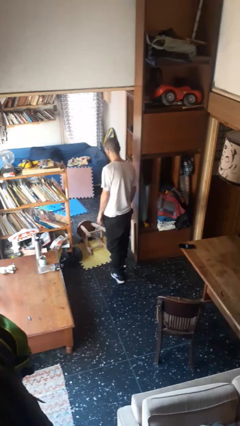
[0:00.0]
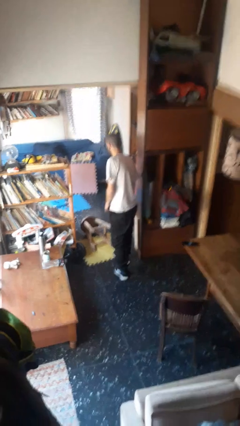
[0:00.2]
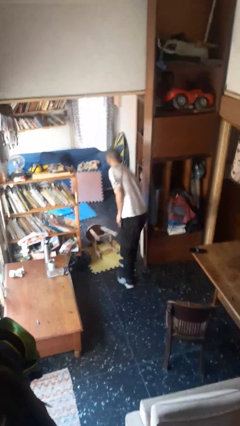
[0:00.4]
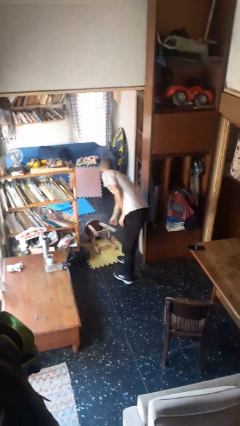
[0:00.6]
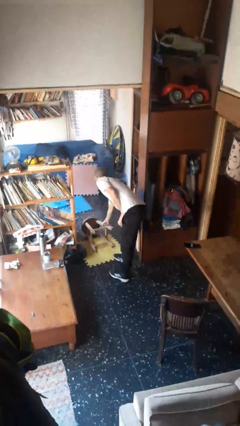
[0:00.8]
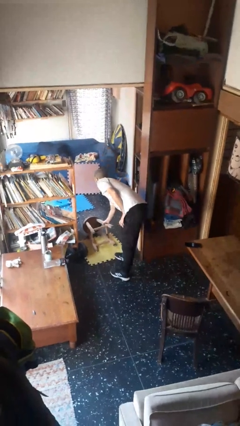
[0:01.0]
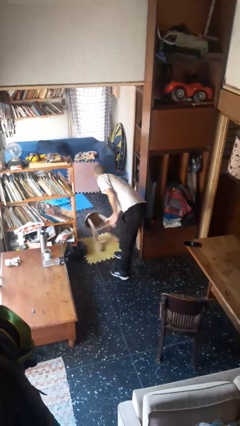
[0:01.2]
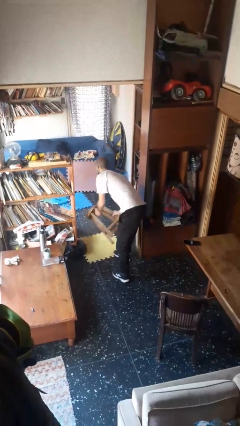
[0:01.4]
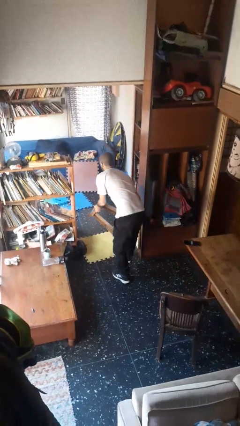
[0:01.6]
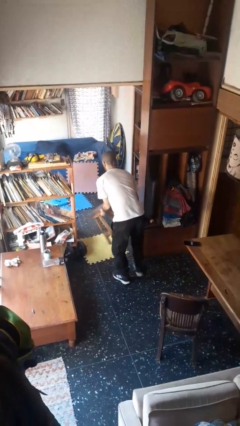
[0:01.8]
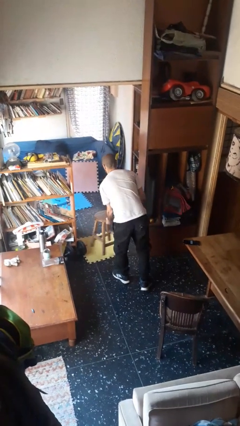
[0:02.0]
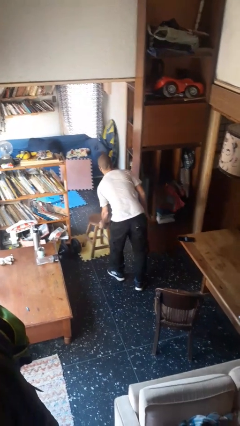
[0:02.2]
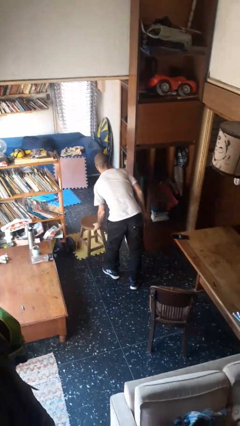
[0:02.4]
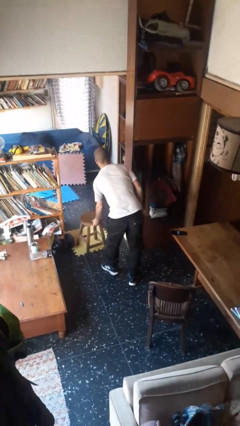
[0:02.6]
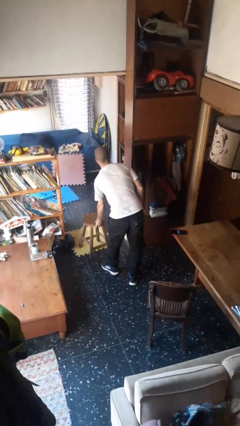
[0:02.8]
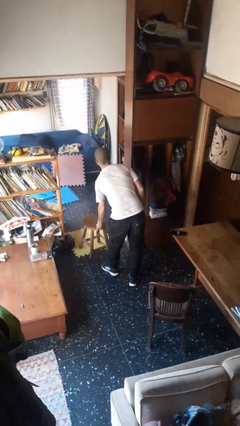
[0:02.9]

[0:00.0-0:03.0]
person sets upright furniture

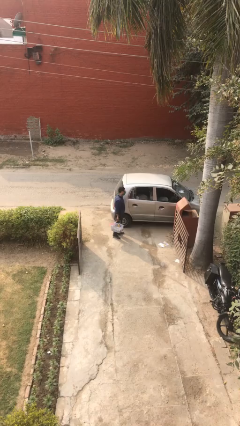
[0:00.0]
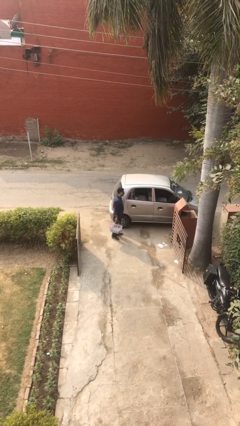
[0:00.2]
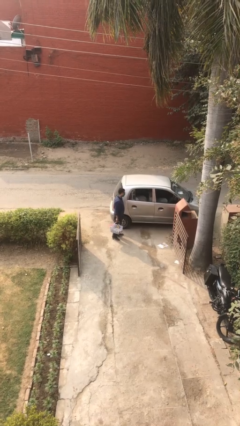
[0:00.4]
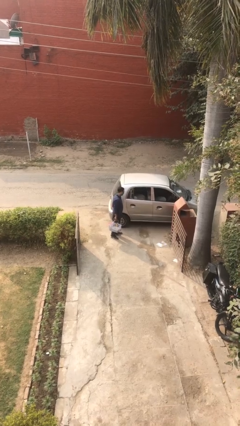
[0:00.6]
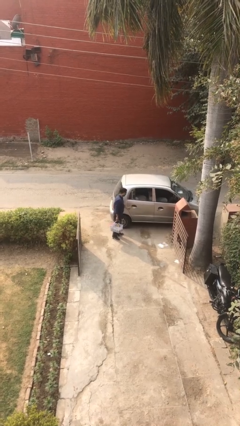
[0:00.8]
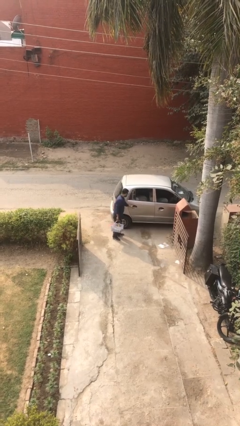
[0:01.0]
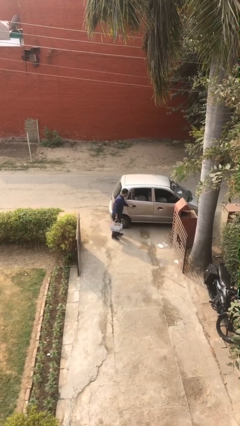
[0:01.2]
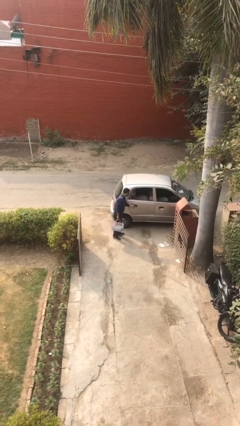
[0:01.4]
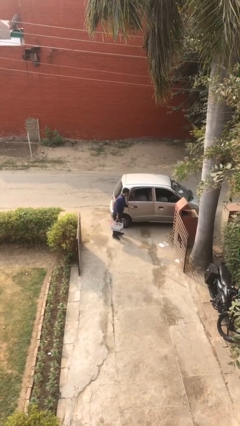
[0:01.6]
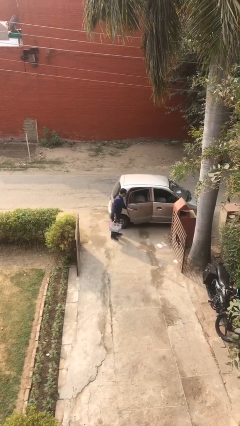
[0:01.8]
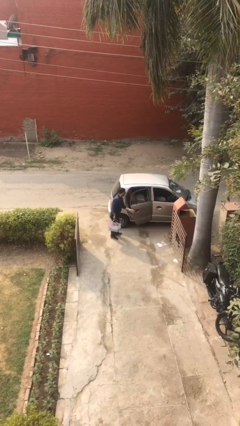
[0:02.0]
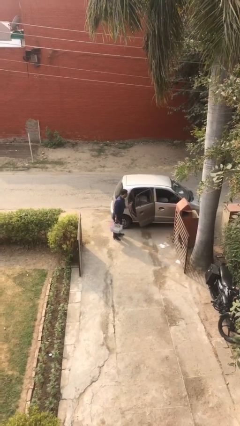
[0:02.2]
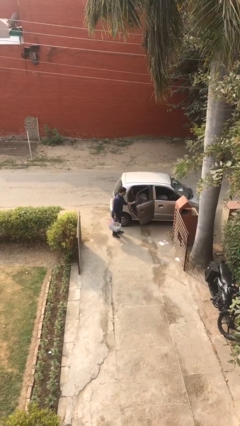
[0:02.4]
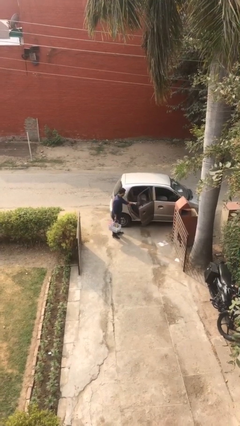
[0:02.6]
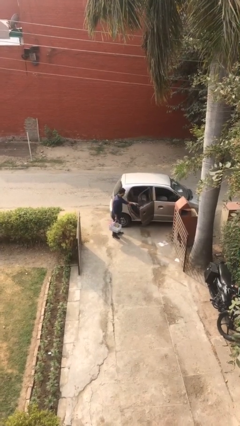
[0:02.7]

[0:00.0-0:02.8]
person opens car door

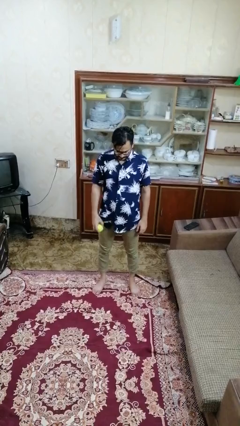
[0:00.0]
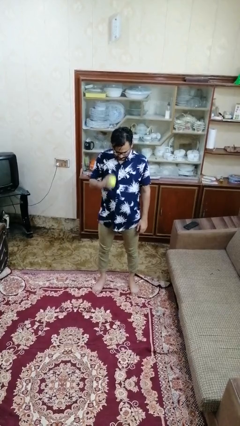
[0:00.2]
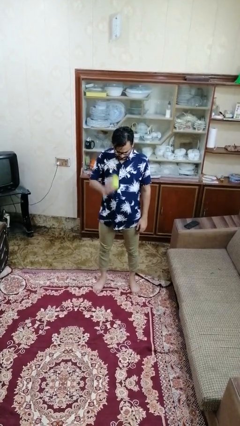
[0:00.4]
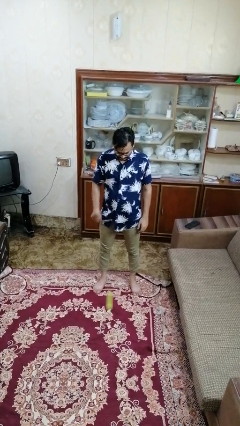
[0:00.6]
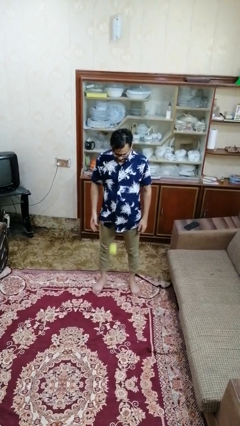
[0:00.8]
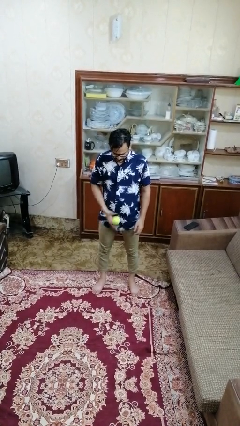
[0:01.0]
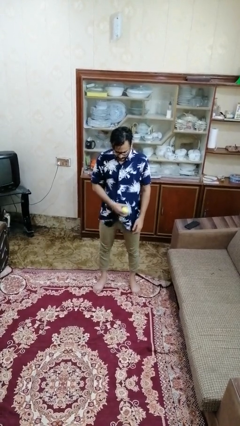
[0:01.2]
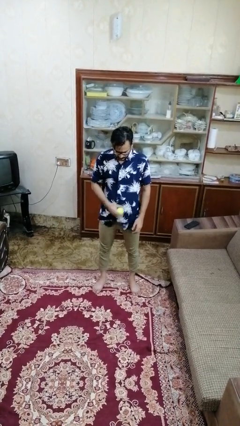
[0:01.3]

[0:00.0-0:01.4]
person bounces ball on floor

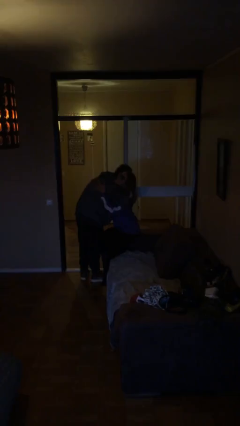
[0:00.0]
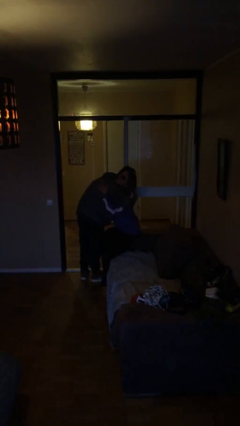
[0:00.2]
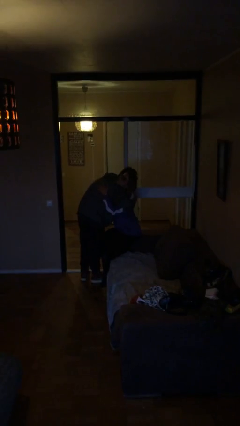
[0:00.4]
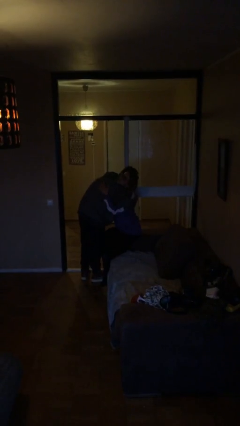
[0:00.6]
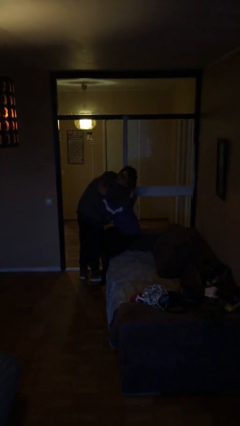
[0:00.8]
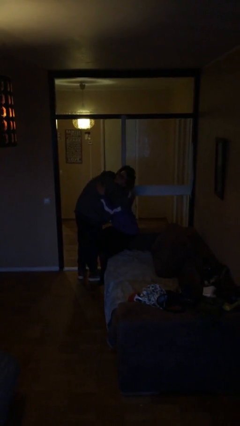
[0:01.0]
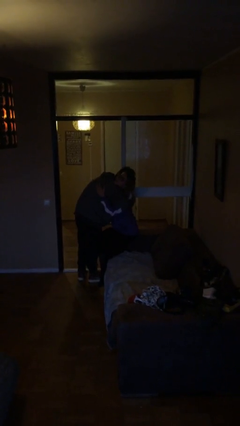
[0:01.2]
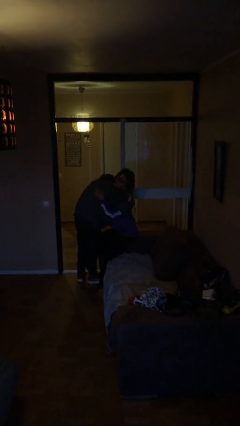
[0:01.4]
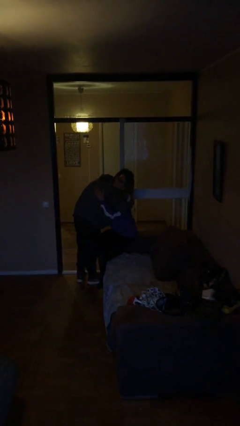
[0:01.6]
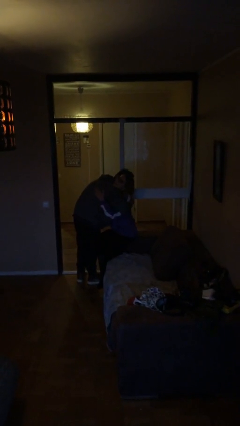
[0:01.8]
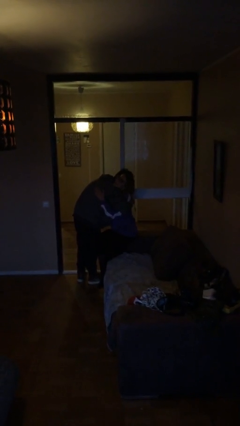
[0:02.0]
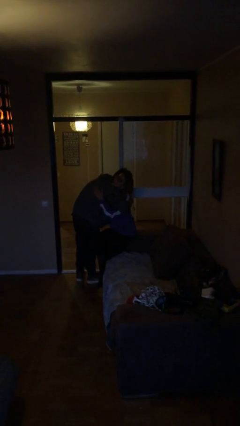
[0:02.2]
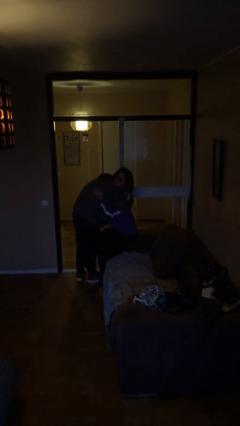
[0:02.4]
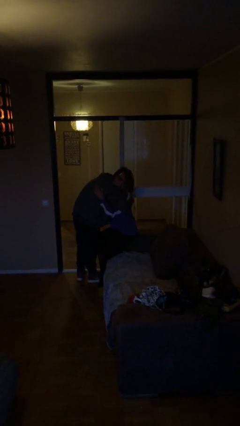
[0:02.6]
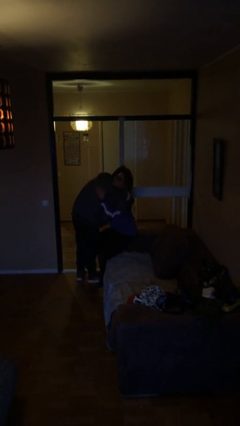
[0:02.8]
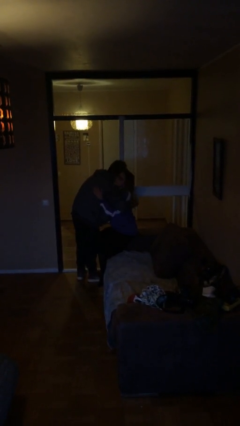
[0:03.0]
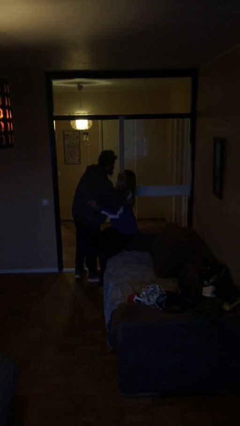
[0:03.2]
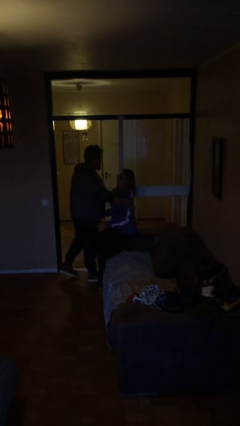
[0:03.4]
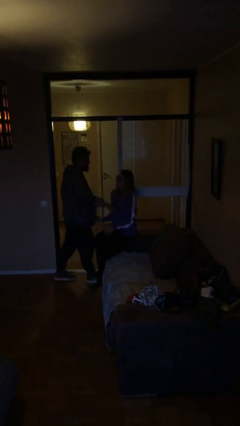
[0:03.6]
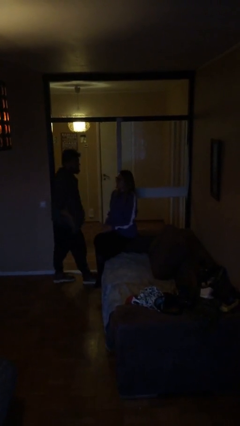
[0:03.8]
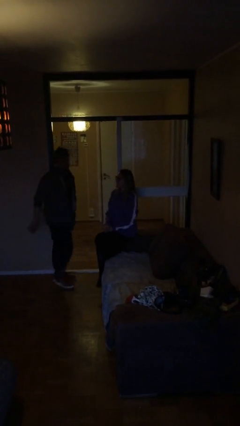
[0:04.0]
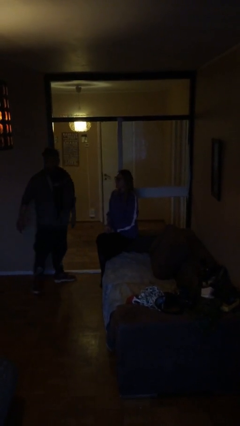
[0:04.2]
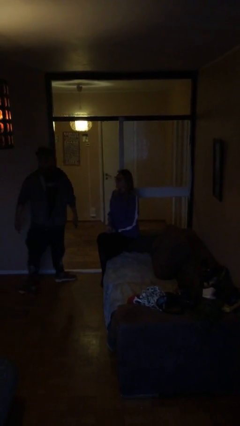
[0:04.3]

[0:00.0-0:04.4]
person embraces person

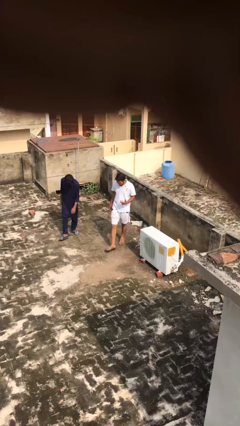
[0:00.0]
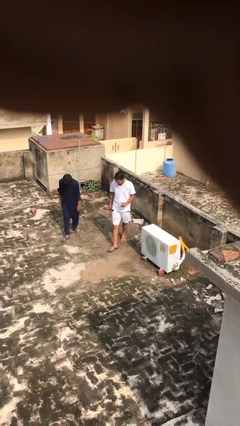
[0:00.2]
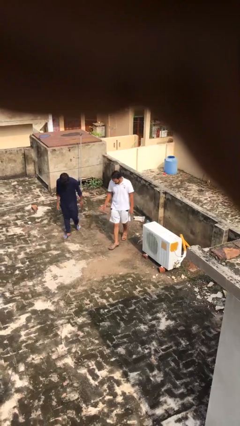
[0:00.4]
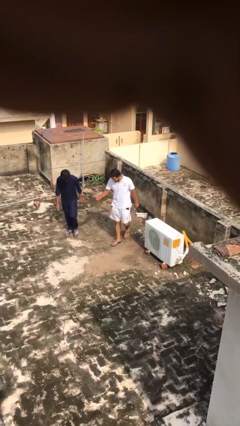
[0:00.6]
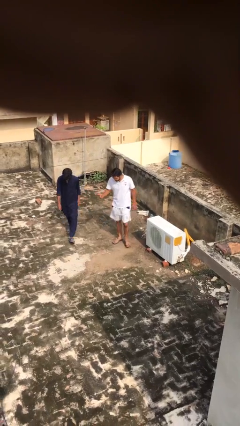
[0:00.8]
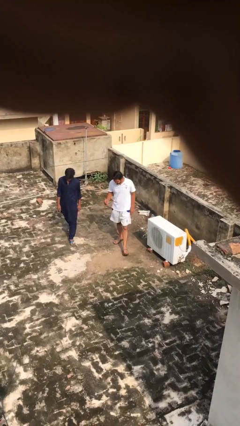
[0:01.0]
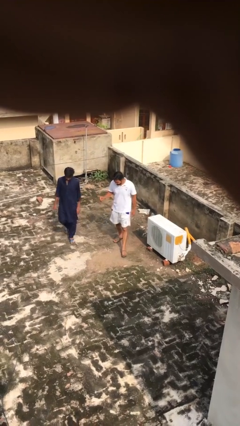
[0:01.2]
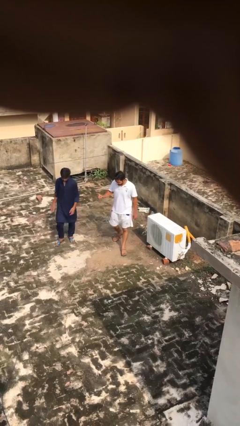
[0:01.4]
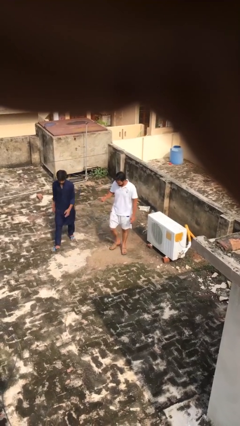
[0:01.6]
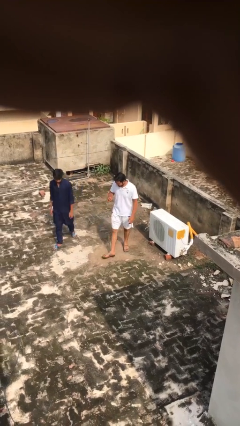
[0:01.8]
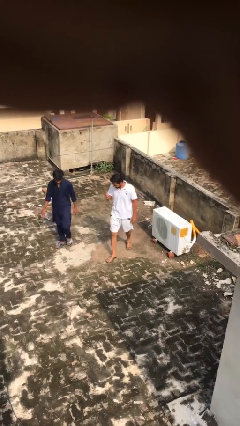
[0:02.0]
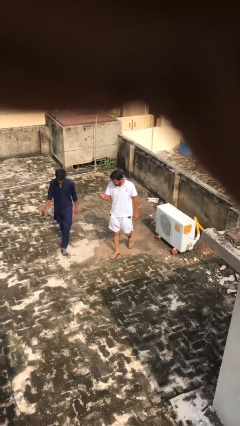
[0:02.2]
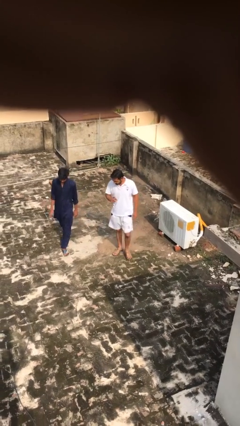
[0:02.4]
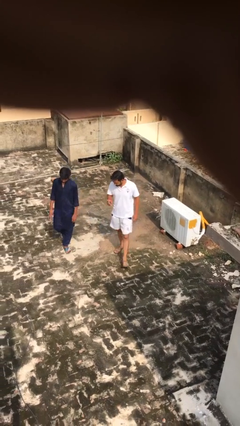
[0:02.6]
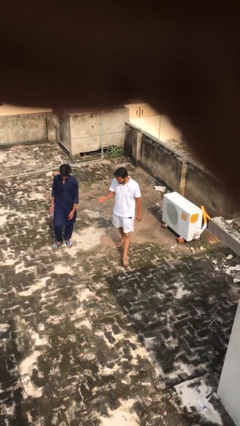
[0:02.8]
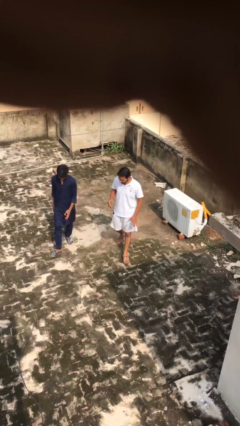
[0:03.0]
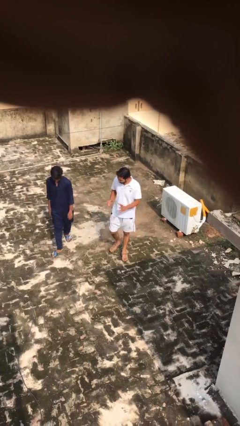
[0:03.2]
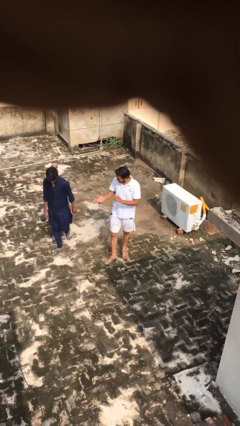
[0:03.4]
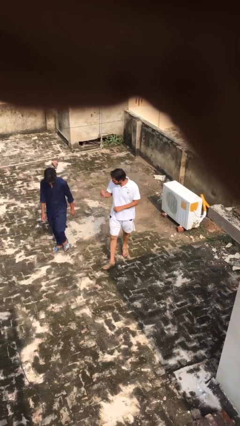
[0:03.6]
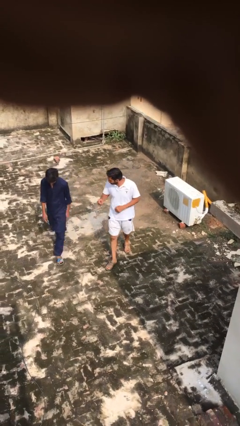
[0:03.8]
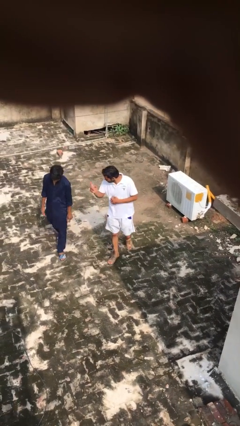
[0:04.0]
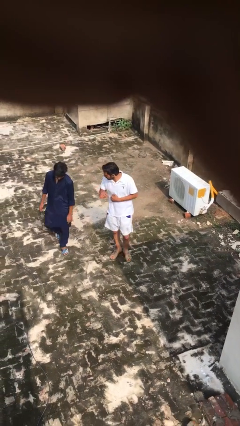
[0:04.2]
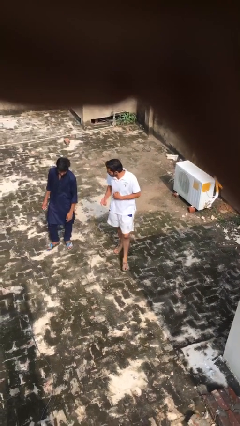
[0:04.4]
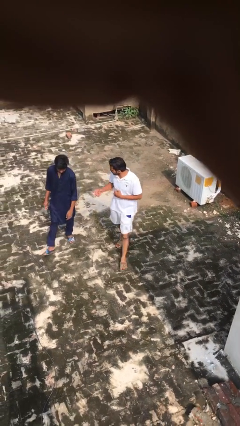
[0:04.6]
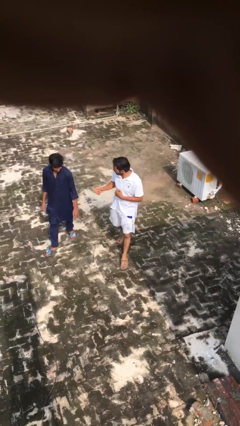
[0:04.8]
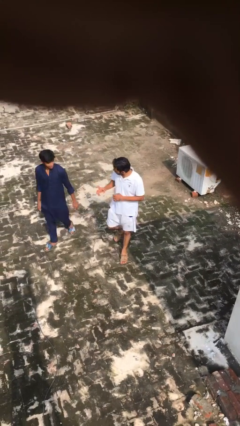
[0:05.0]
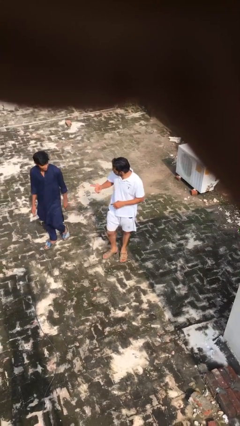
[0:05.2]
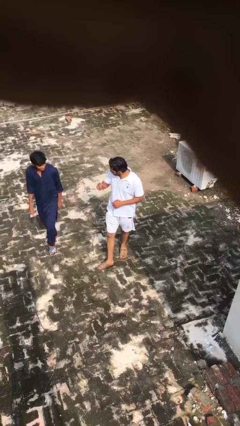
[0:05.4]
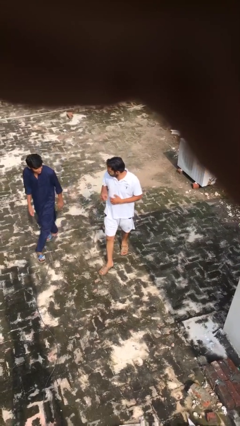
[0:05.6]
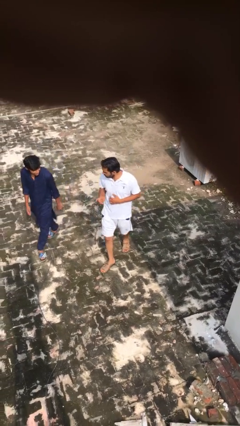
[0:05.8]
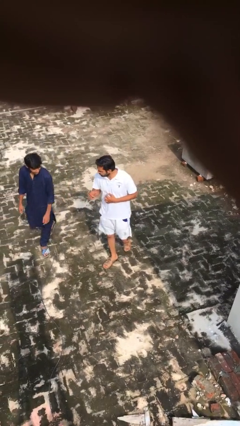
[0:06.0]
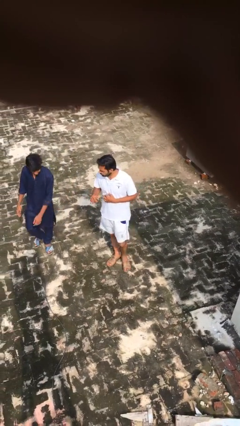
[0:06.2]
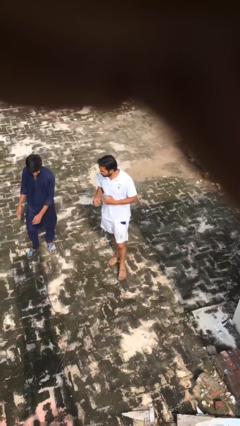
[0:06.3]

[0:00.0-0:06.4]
person talks to person
